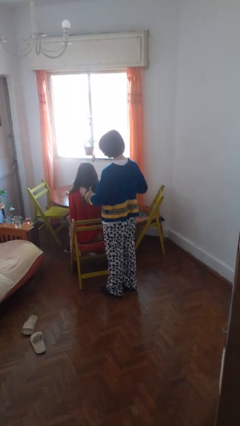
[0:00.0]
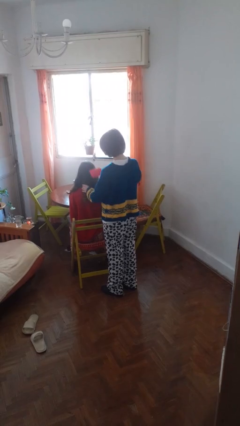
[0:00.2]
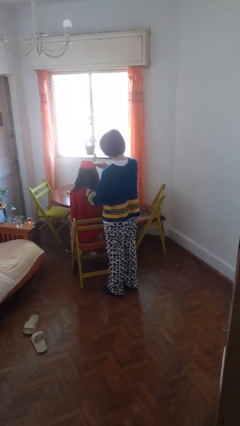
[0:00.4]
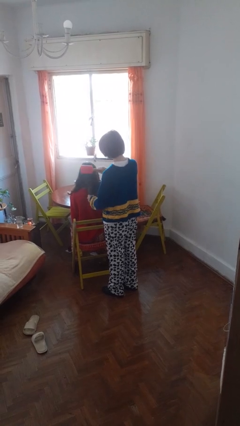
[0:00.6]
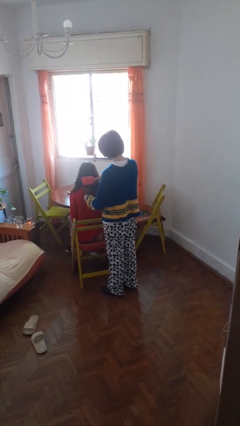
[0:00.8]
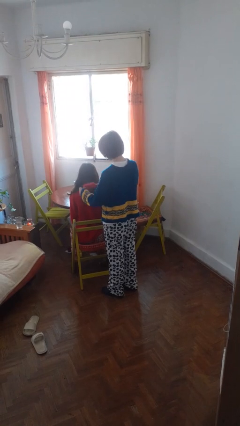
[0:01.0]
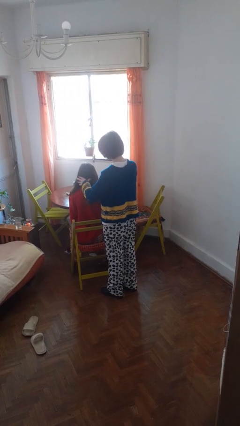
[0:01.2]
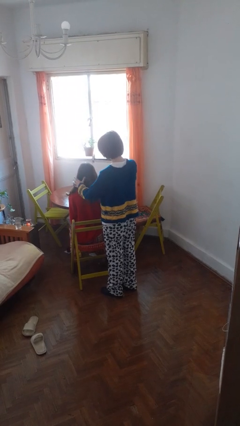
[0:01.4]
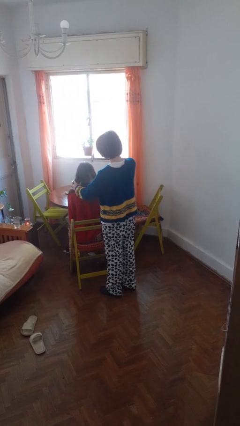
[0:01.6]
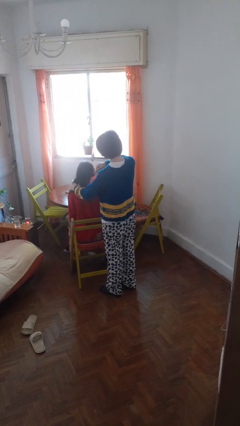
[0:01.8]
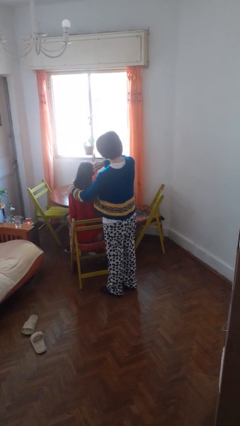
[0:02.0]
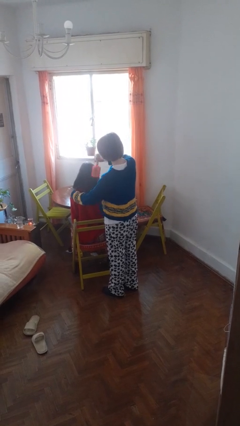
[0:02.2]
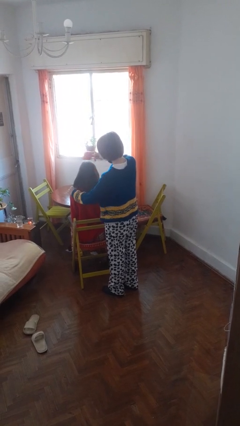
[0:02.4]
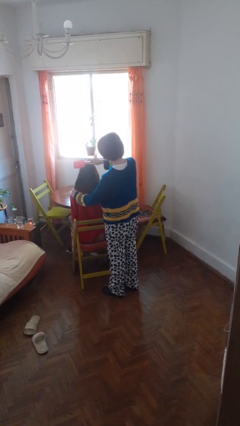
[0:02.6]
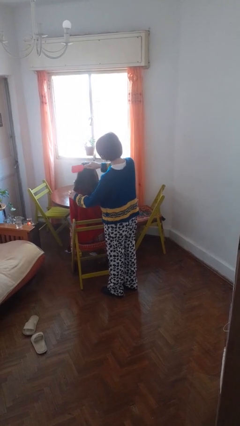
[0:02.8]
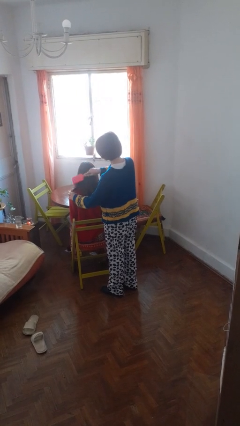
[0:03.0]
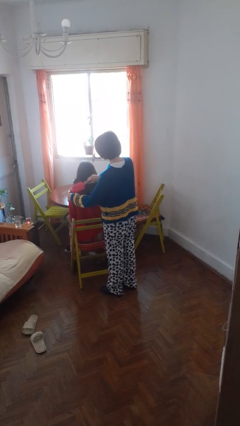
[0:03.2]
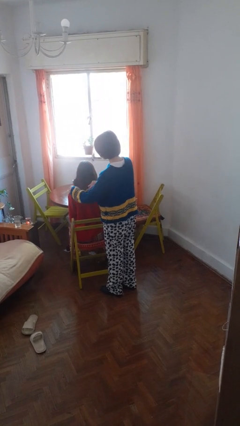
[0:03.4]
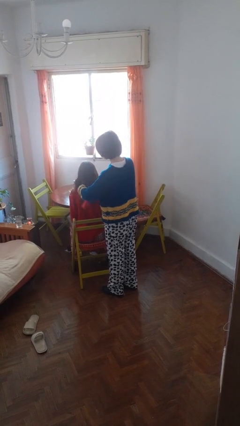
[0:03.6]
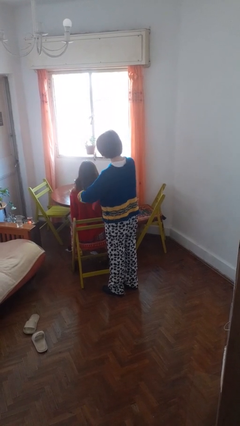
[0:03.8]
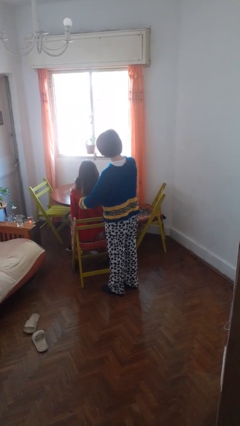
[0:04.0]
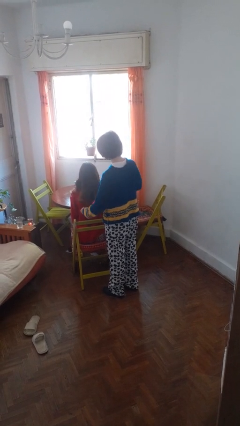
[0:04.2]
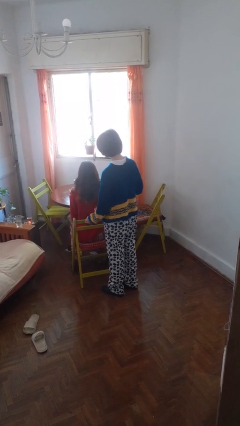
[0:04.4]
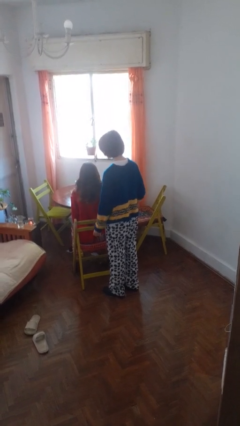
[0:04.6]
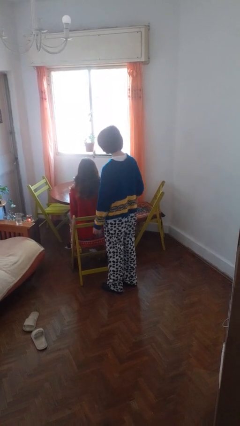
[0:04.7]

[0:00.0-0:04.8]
person brushes hair of person

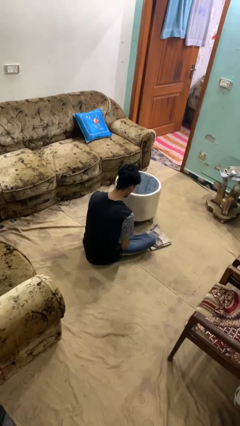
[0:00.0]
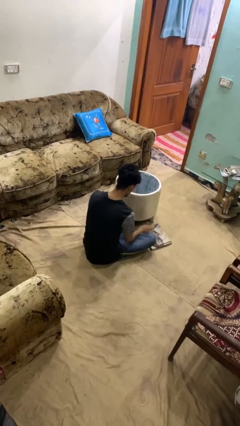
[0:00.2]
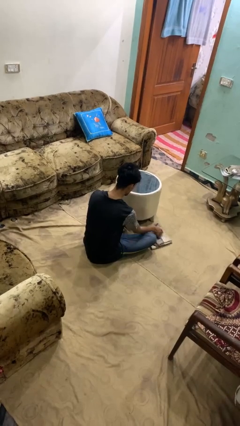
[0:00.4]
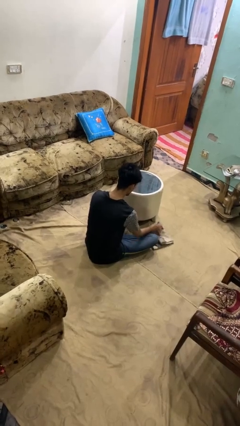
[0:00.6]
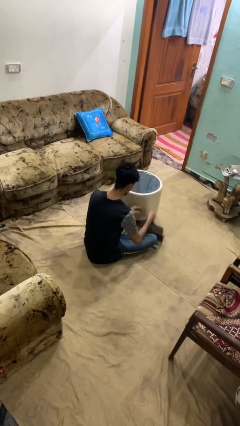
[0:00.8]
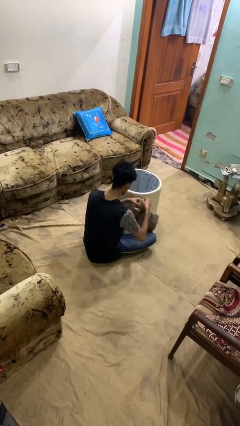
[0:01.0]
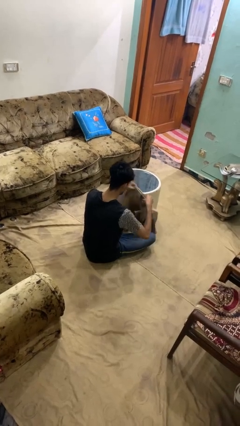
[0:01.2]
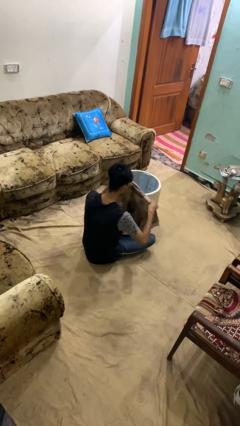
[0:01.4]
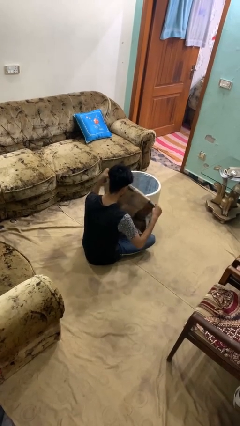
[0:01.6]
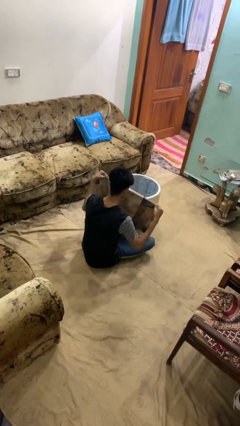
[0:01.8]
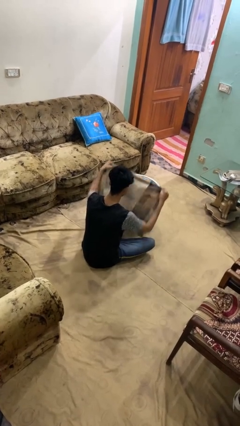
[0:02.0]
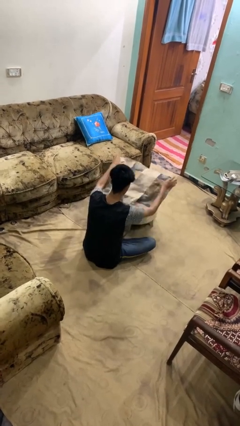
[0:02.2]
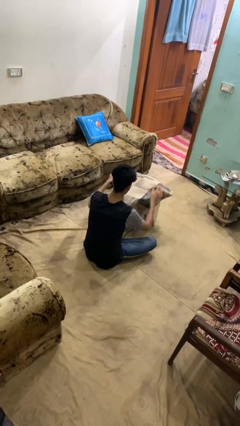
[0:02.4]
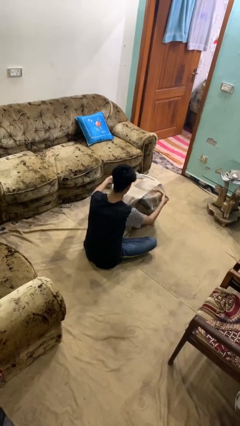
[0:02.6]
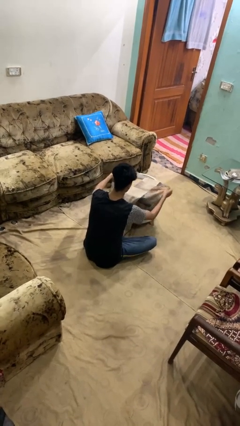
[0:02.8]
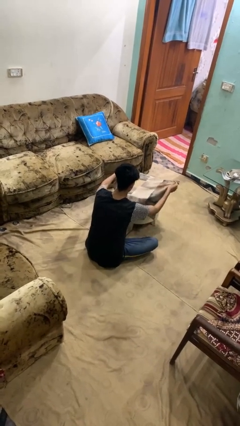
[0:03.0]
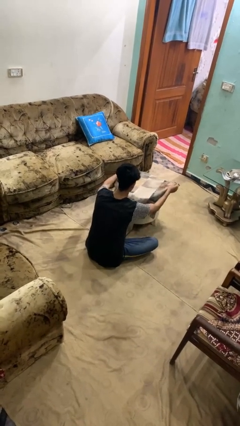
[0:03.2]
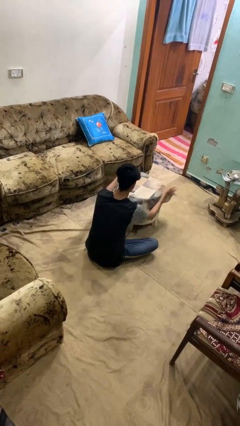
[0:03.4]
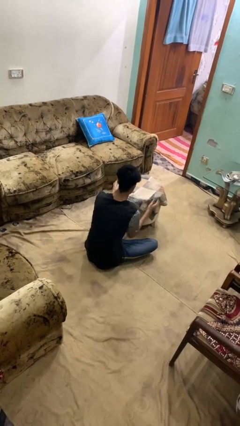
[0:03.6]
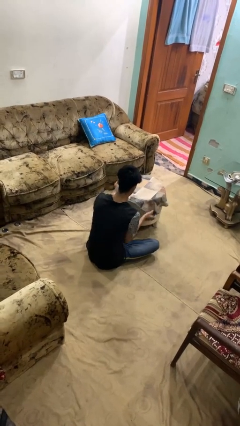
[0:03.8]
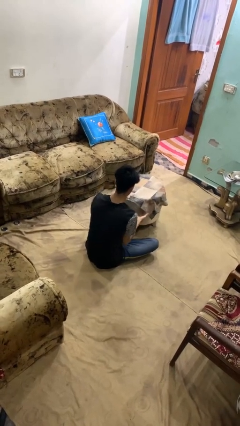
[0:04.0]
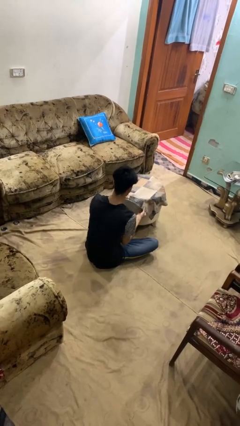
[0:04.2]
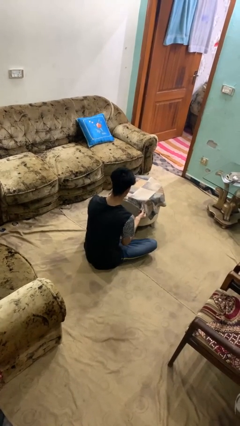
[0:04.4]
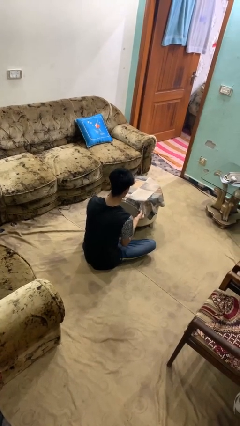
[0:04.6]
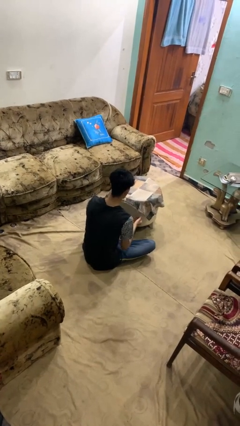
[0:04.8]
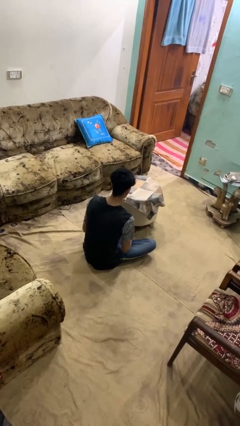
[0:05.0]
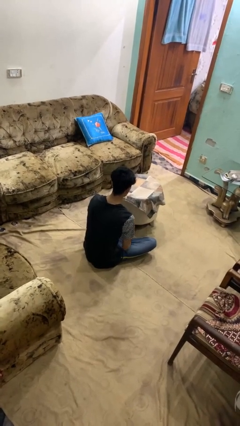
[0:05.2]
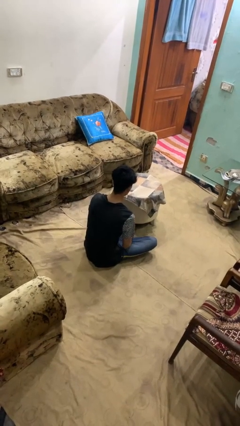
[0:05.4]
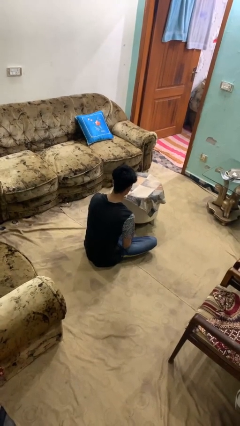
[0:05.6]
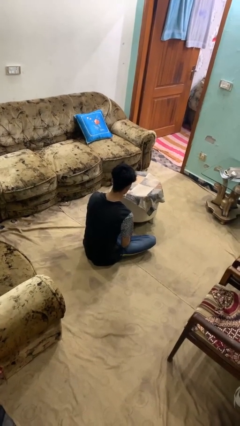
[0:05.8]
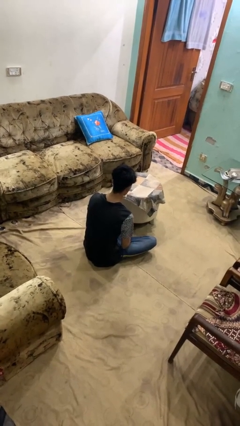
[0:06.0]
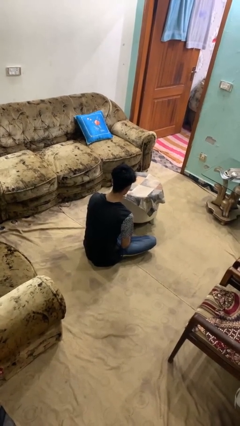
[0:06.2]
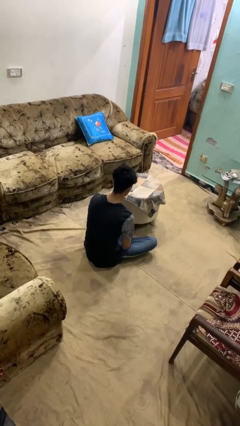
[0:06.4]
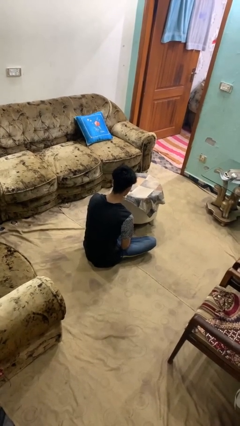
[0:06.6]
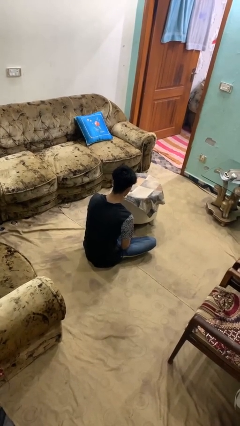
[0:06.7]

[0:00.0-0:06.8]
person spreads tablecloth

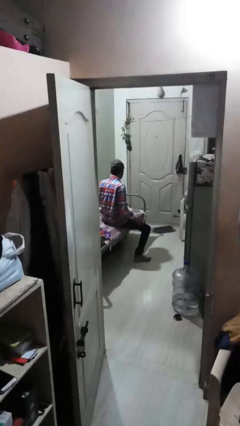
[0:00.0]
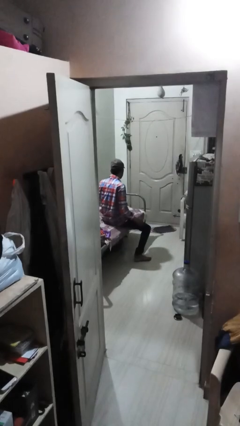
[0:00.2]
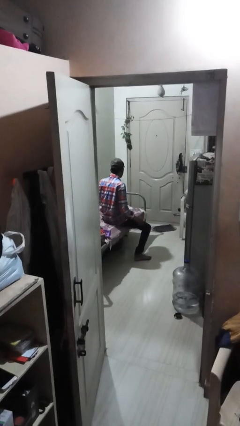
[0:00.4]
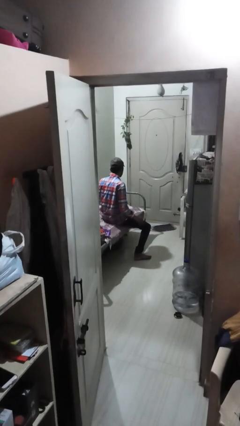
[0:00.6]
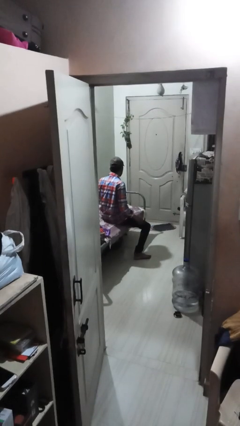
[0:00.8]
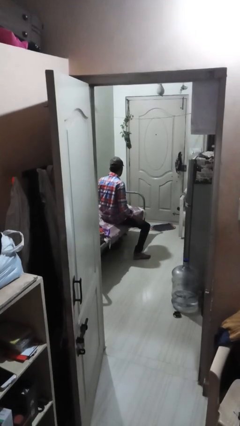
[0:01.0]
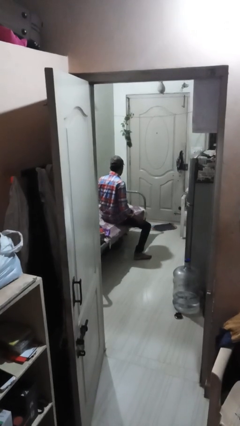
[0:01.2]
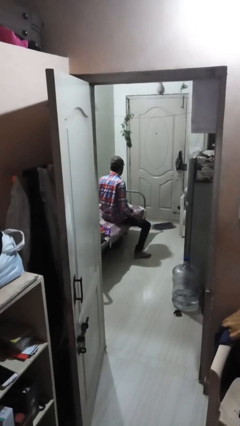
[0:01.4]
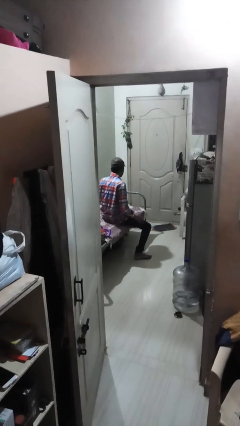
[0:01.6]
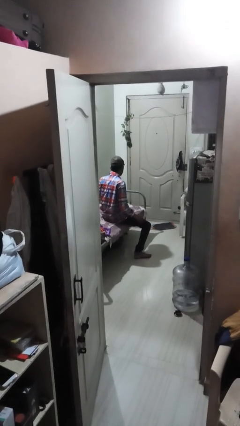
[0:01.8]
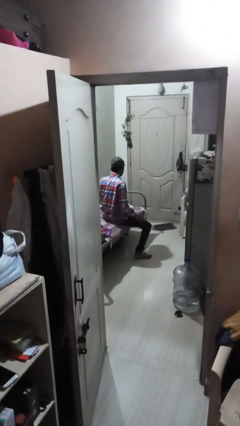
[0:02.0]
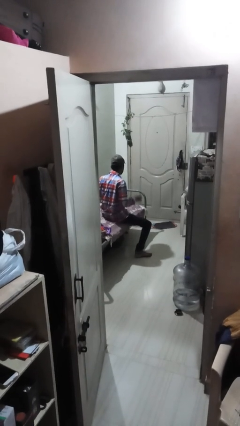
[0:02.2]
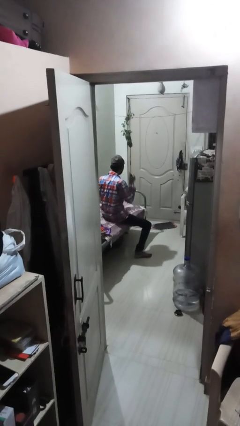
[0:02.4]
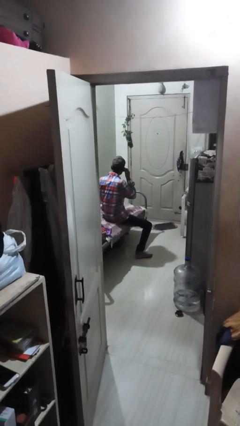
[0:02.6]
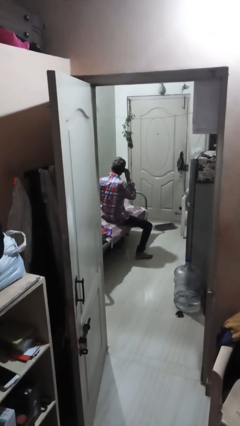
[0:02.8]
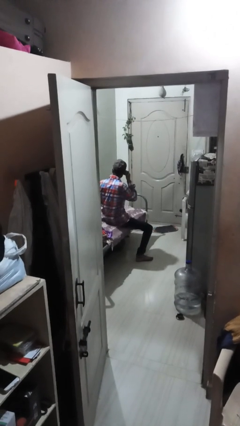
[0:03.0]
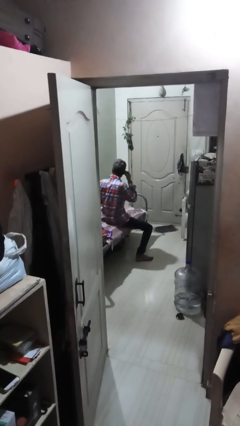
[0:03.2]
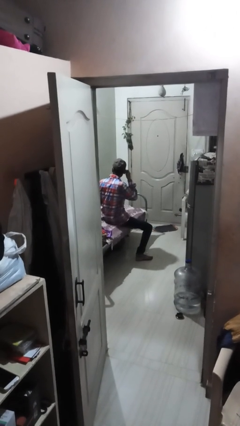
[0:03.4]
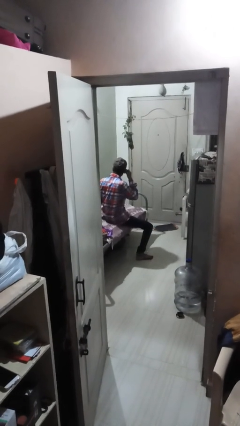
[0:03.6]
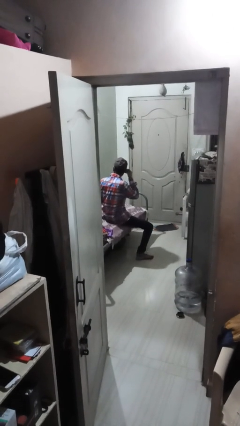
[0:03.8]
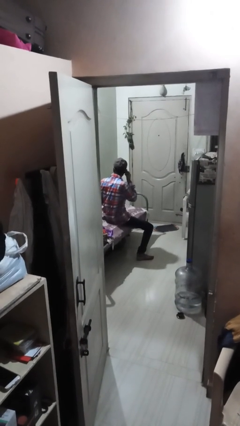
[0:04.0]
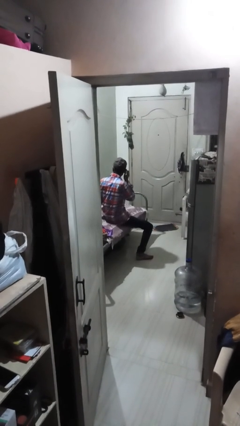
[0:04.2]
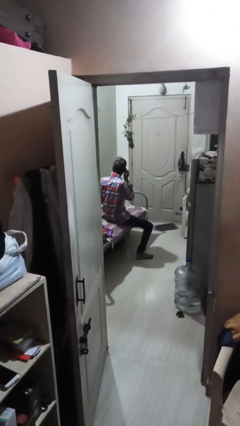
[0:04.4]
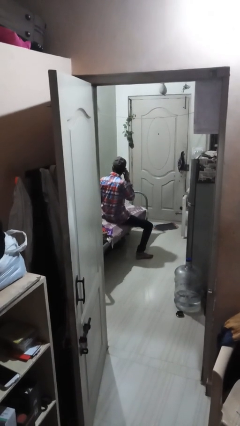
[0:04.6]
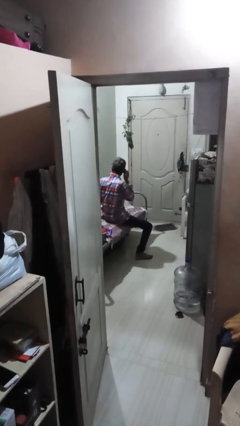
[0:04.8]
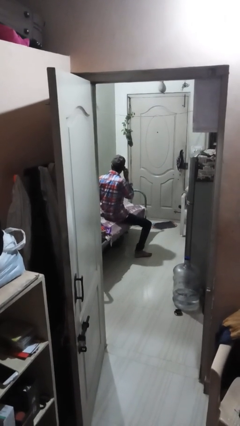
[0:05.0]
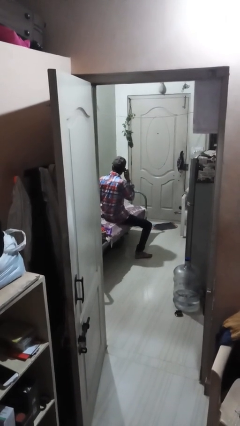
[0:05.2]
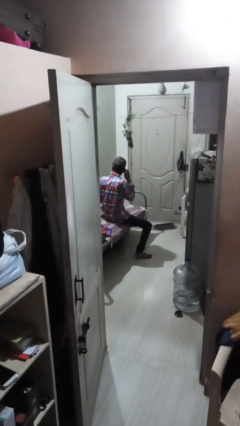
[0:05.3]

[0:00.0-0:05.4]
person touches earlobe

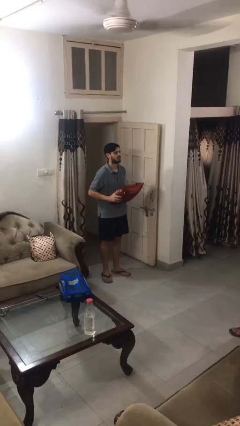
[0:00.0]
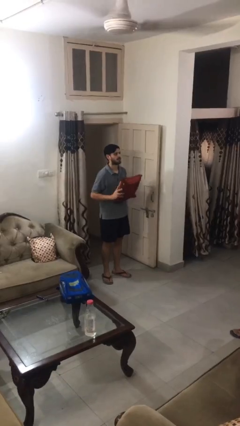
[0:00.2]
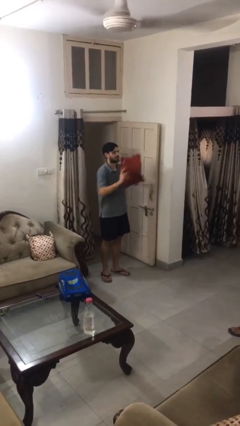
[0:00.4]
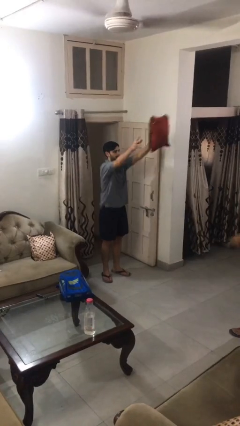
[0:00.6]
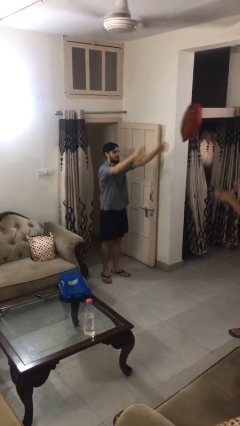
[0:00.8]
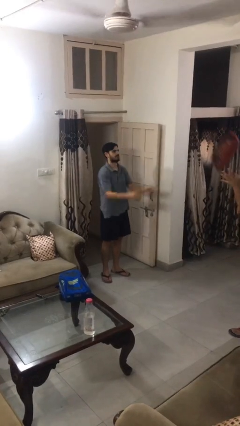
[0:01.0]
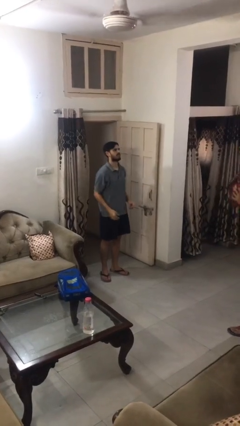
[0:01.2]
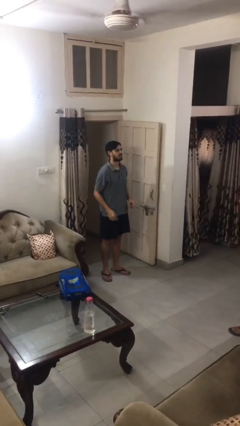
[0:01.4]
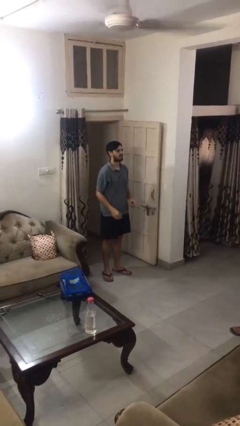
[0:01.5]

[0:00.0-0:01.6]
person throws object to person
